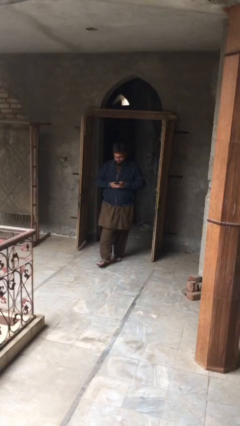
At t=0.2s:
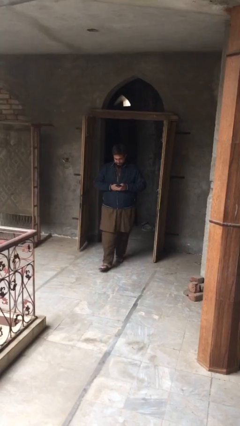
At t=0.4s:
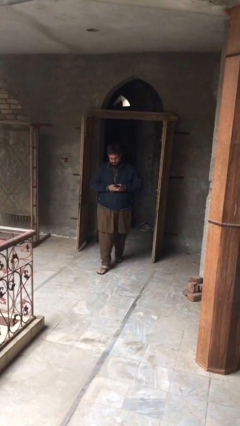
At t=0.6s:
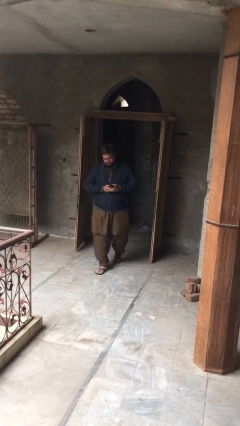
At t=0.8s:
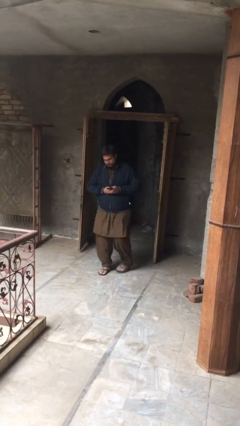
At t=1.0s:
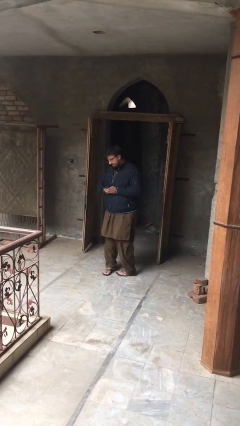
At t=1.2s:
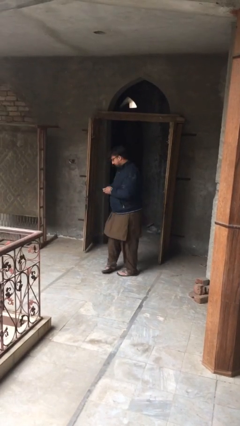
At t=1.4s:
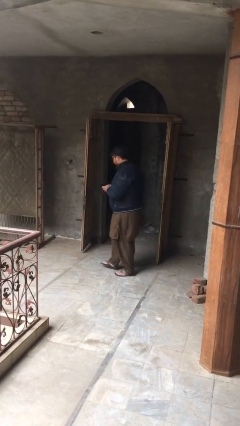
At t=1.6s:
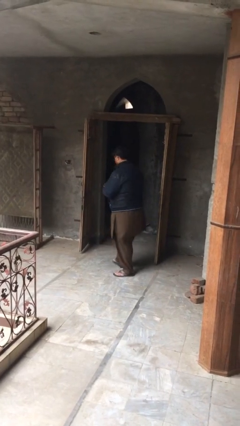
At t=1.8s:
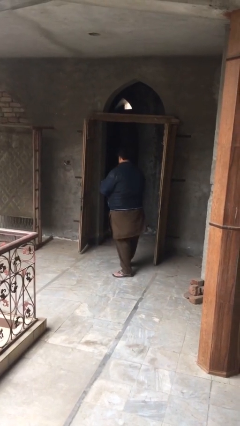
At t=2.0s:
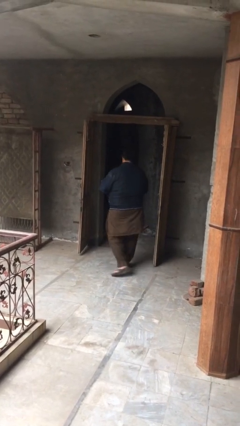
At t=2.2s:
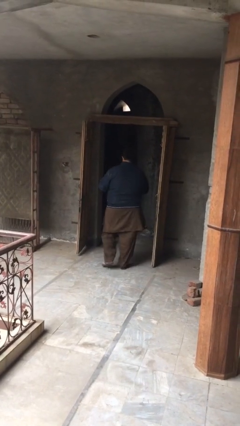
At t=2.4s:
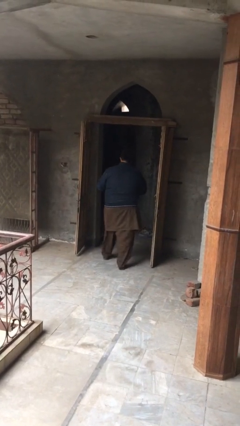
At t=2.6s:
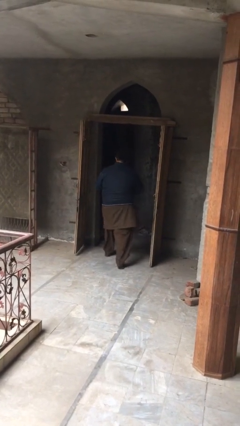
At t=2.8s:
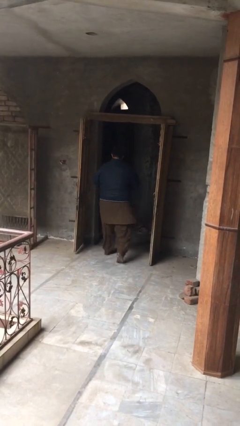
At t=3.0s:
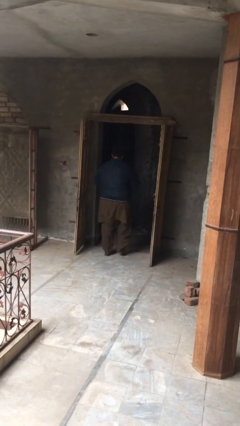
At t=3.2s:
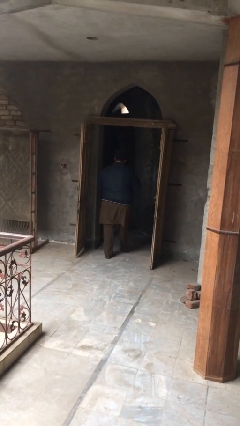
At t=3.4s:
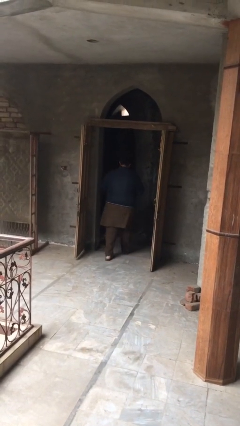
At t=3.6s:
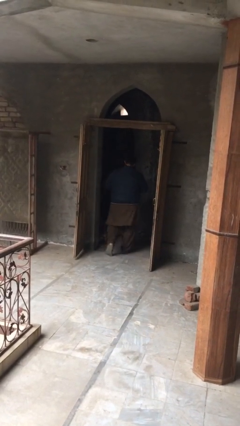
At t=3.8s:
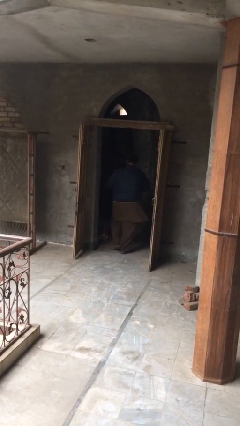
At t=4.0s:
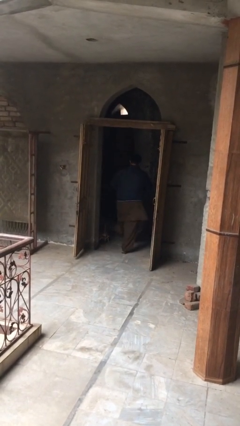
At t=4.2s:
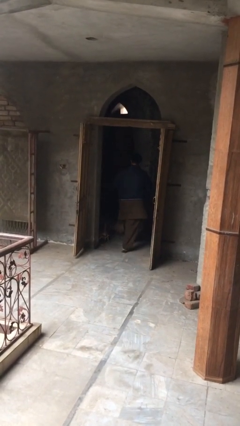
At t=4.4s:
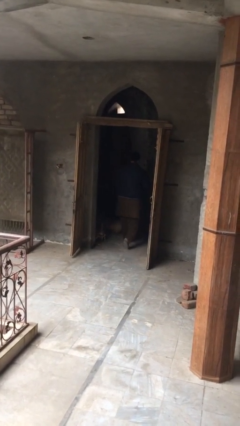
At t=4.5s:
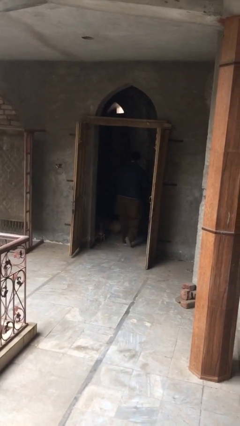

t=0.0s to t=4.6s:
person exits scene through structure

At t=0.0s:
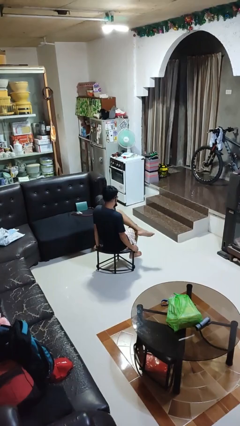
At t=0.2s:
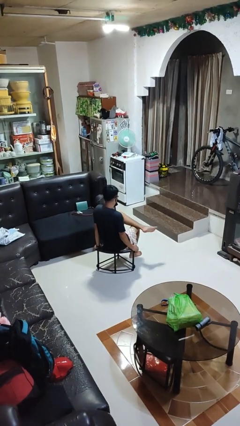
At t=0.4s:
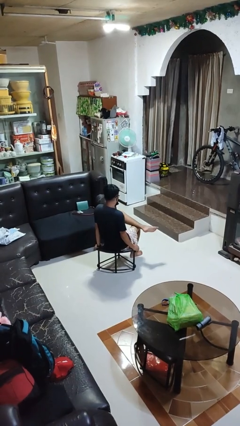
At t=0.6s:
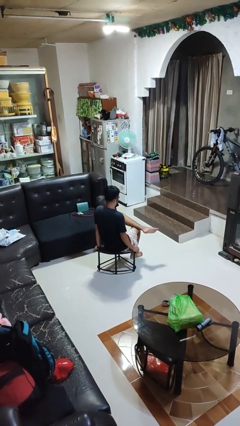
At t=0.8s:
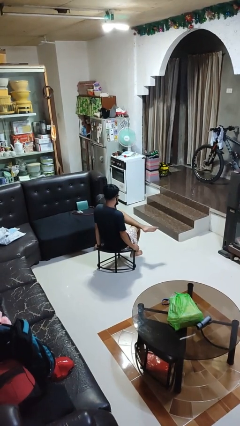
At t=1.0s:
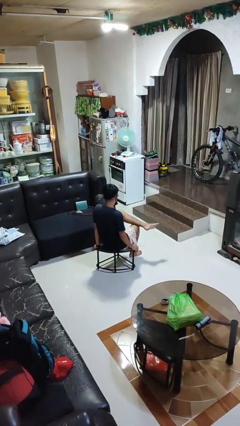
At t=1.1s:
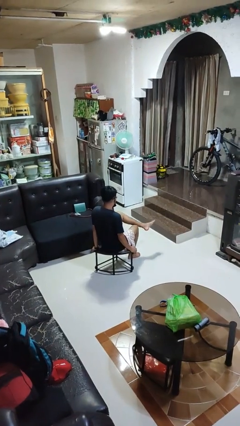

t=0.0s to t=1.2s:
person crosses legs

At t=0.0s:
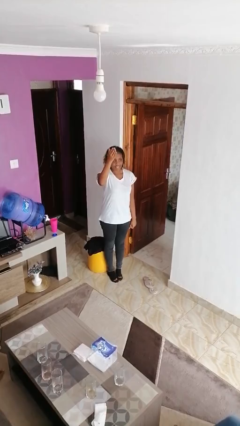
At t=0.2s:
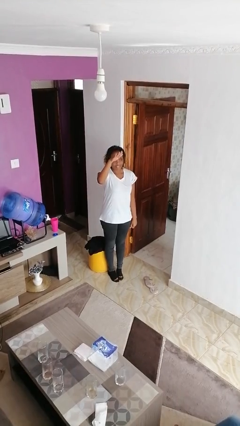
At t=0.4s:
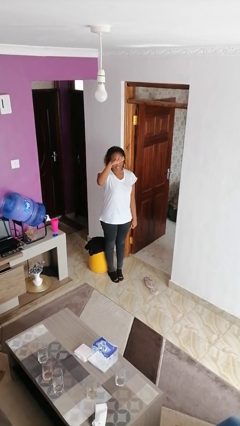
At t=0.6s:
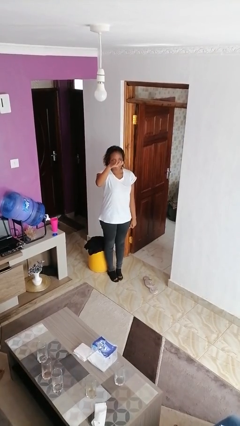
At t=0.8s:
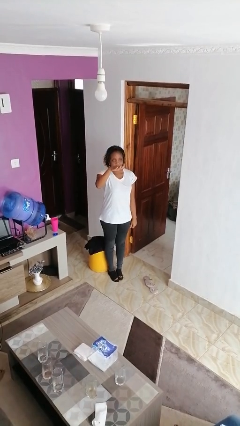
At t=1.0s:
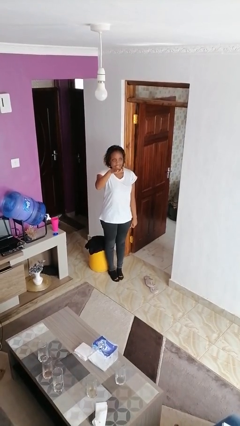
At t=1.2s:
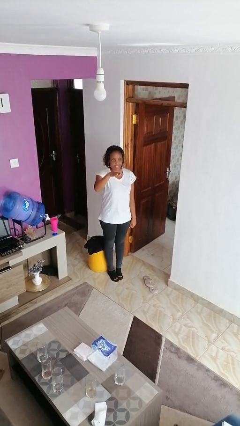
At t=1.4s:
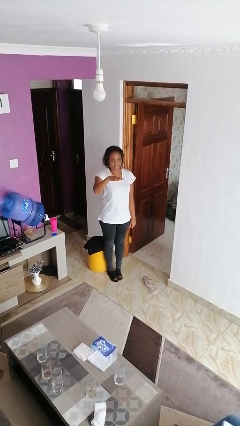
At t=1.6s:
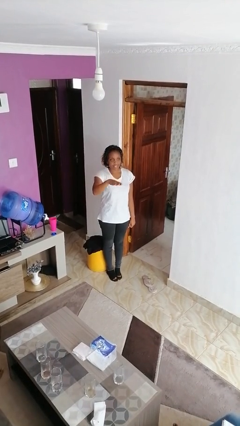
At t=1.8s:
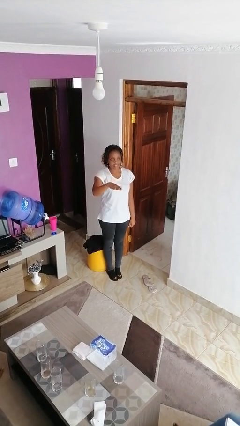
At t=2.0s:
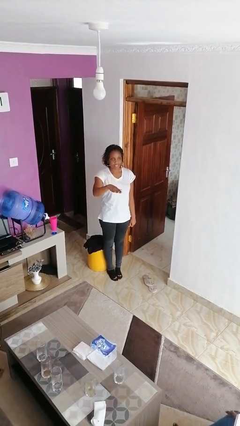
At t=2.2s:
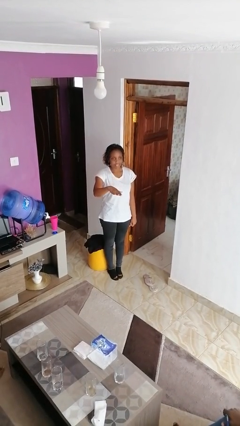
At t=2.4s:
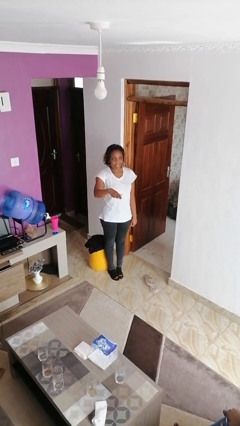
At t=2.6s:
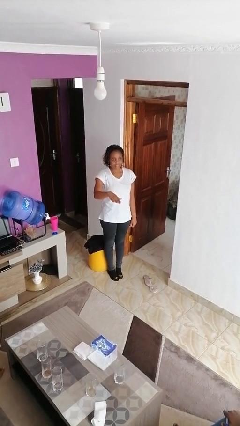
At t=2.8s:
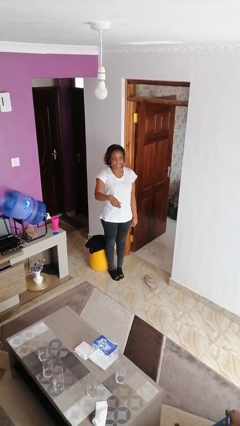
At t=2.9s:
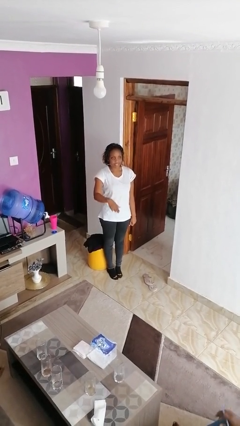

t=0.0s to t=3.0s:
person gestures swipe down

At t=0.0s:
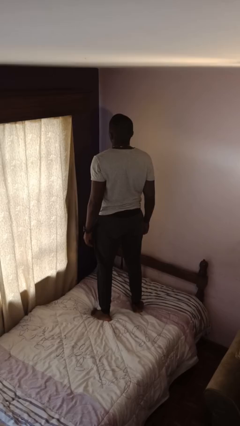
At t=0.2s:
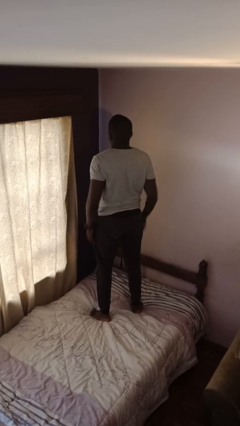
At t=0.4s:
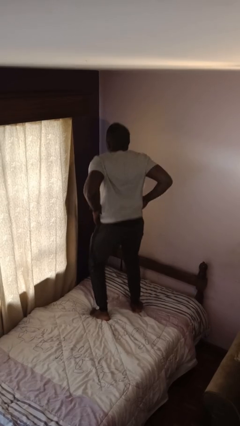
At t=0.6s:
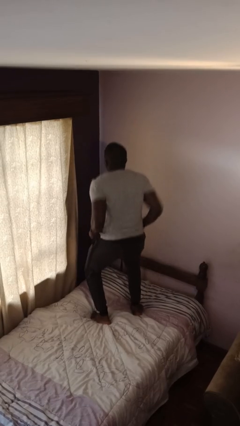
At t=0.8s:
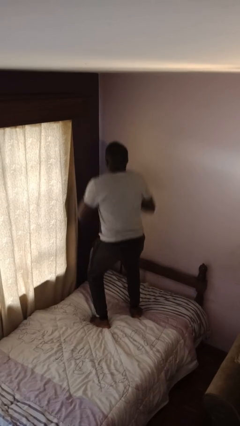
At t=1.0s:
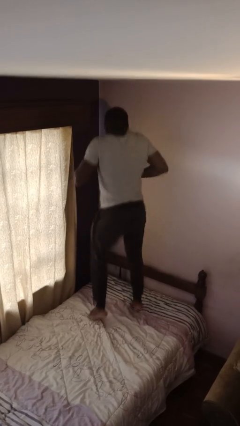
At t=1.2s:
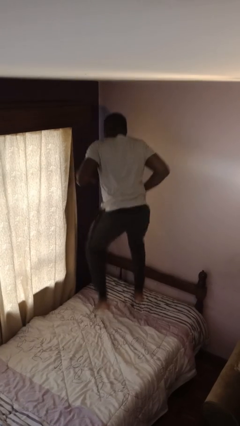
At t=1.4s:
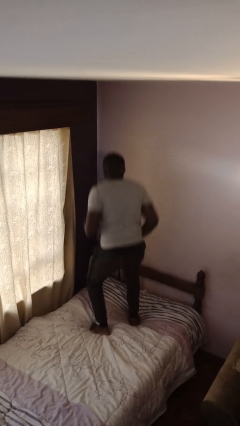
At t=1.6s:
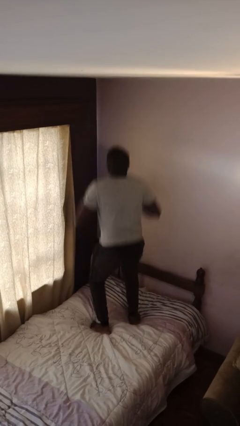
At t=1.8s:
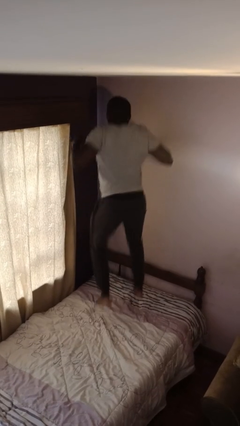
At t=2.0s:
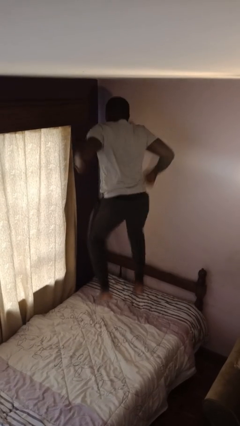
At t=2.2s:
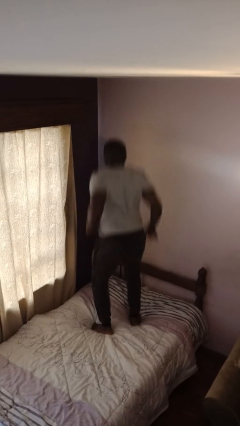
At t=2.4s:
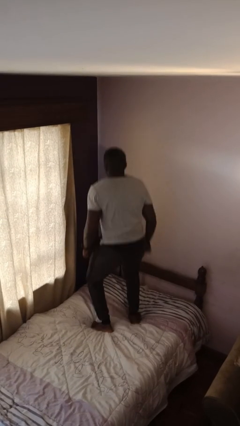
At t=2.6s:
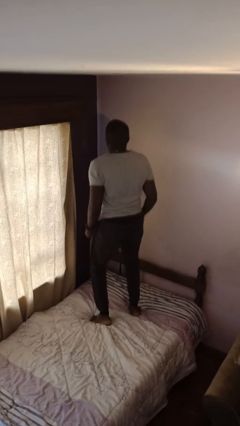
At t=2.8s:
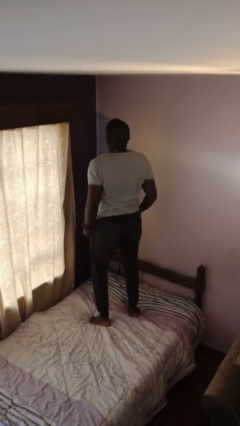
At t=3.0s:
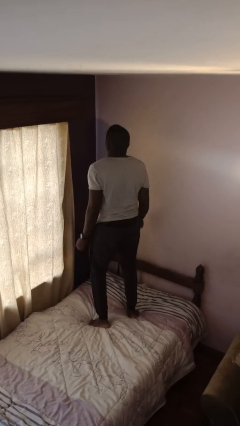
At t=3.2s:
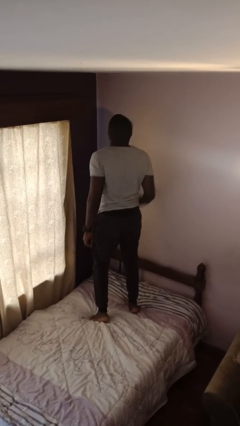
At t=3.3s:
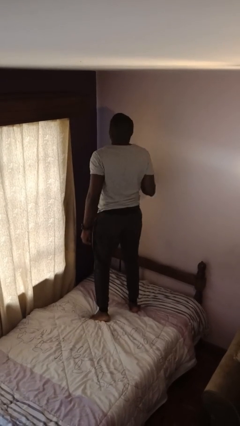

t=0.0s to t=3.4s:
person jumps on bed

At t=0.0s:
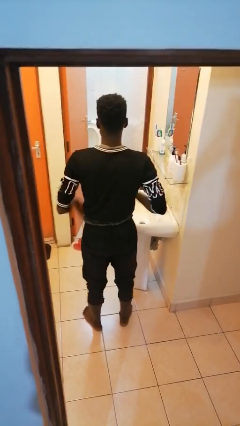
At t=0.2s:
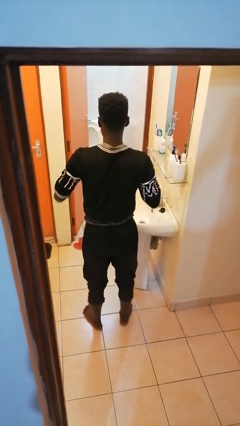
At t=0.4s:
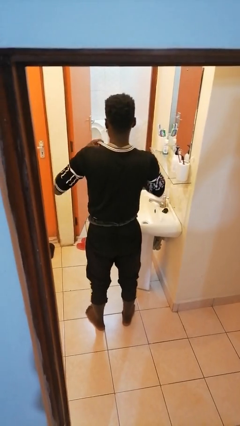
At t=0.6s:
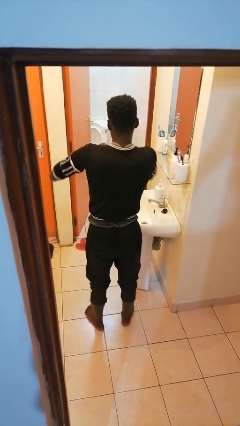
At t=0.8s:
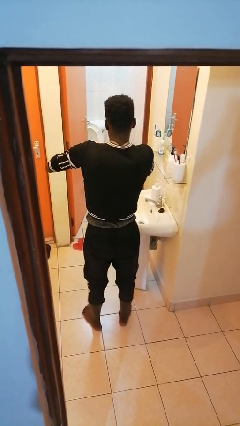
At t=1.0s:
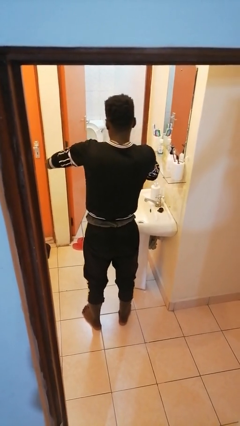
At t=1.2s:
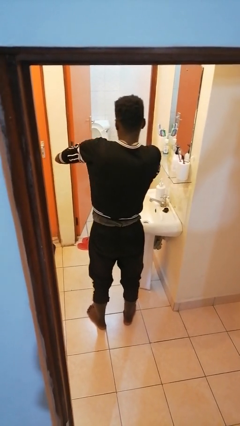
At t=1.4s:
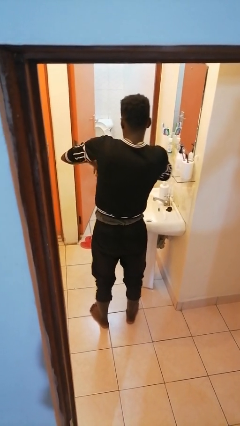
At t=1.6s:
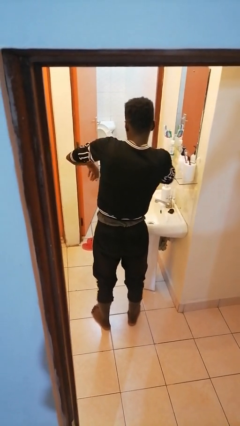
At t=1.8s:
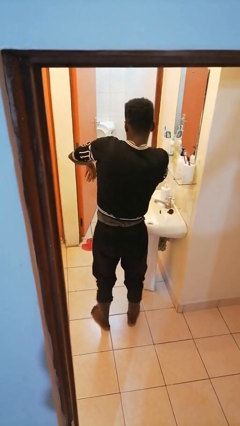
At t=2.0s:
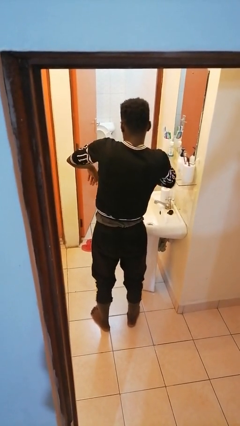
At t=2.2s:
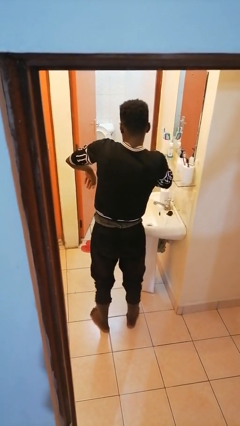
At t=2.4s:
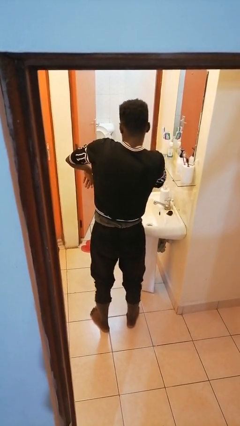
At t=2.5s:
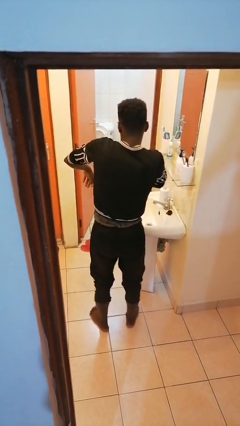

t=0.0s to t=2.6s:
person applies deodorant

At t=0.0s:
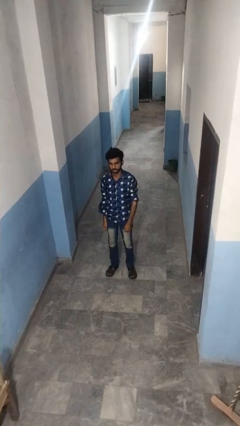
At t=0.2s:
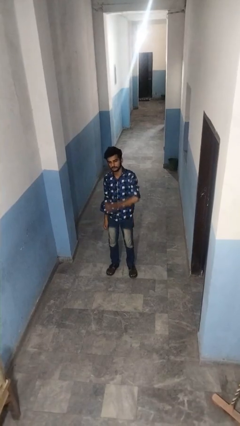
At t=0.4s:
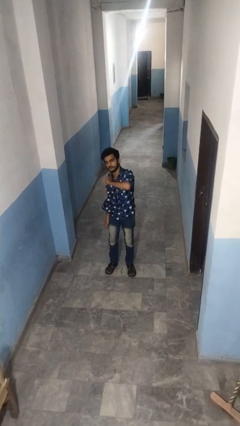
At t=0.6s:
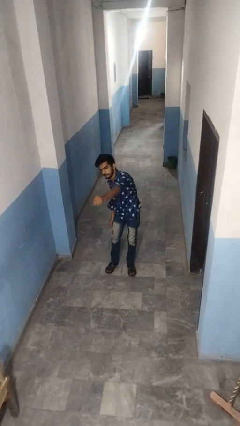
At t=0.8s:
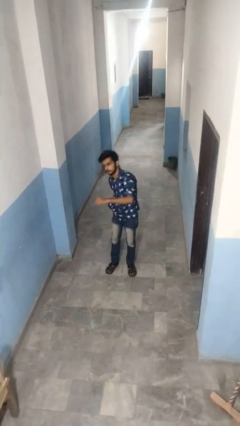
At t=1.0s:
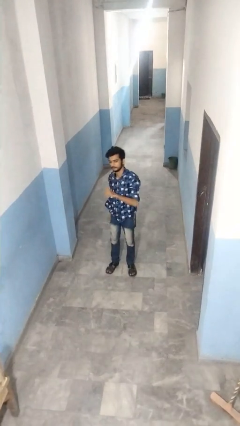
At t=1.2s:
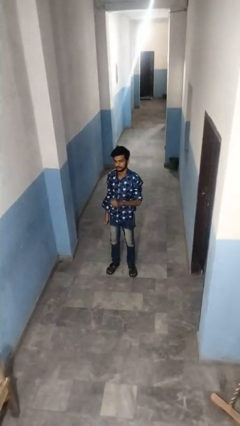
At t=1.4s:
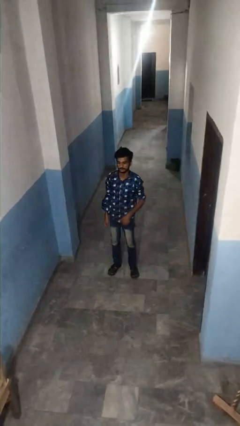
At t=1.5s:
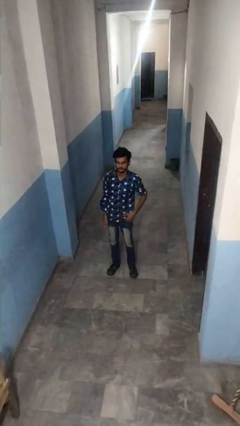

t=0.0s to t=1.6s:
person punches

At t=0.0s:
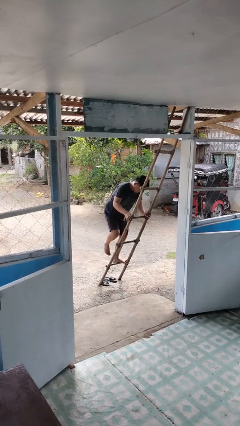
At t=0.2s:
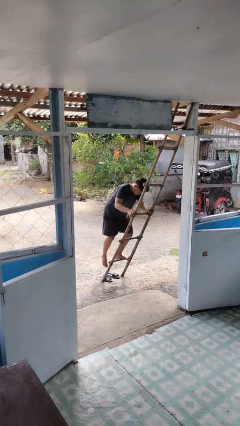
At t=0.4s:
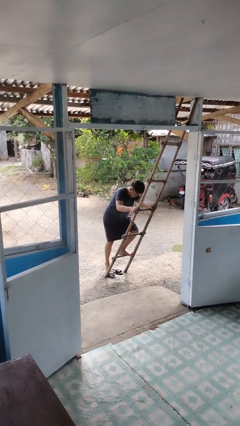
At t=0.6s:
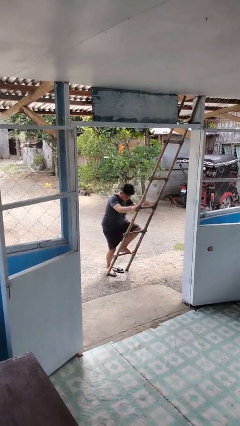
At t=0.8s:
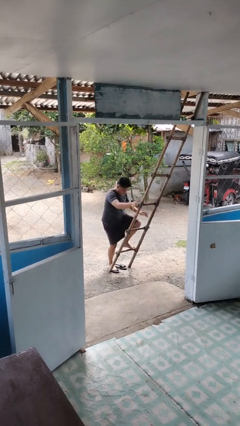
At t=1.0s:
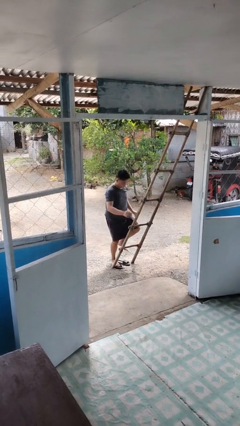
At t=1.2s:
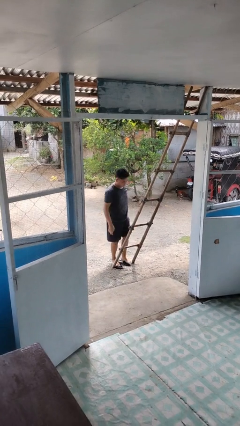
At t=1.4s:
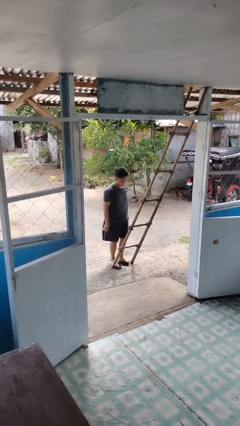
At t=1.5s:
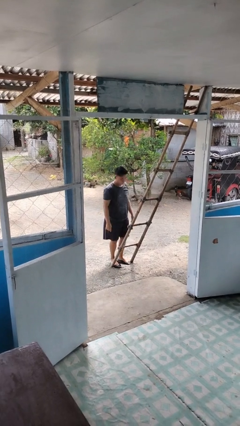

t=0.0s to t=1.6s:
person climbs down ladder
